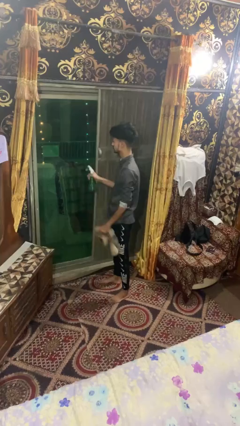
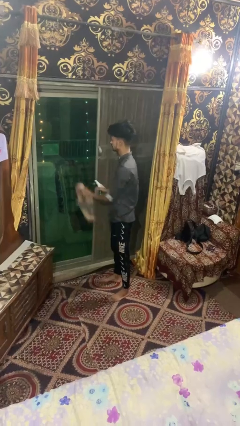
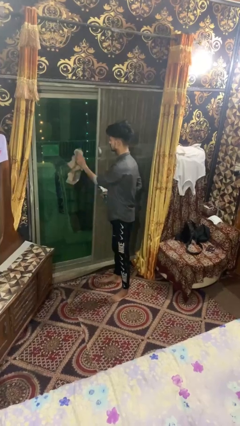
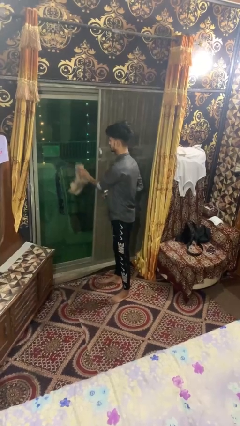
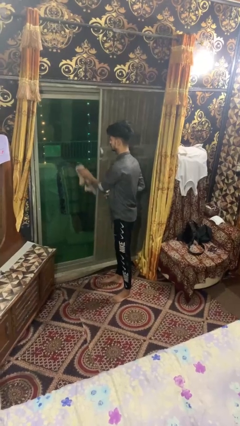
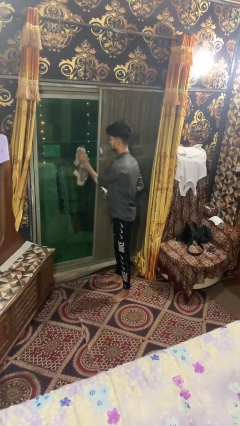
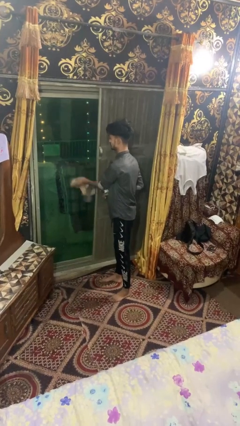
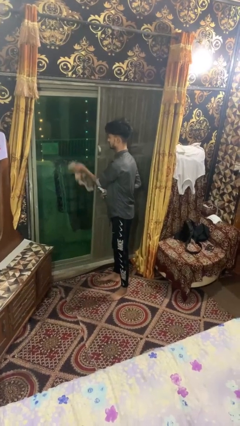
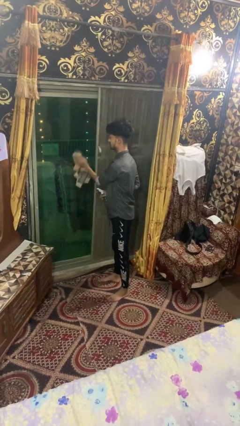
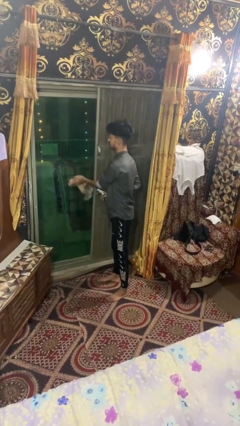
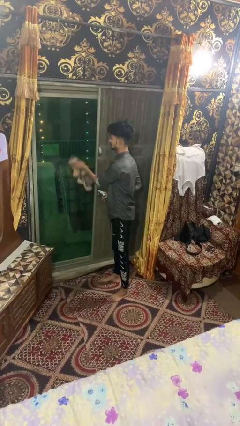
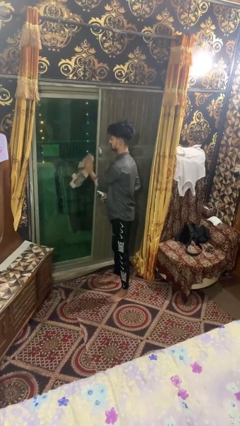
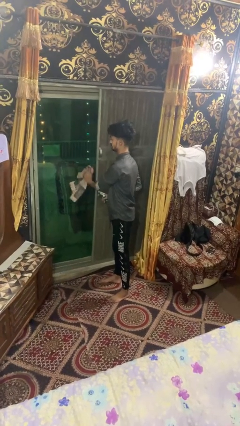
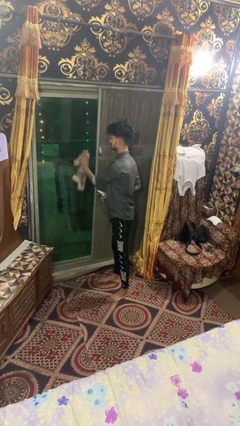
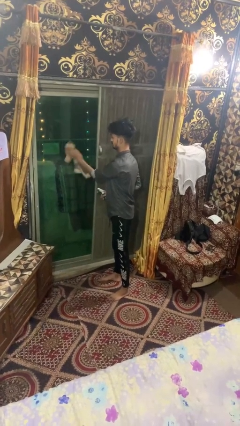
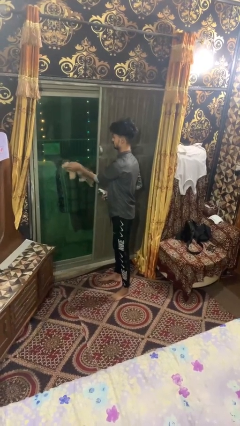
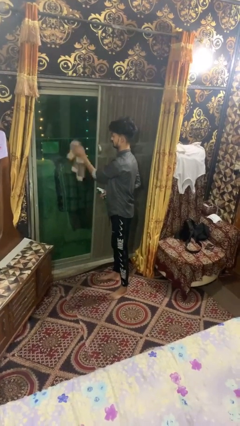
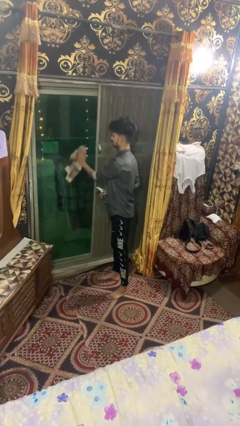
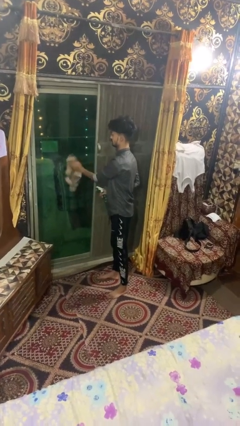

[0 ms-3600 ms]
person washes window

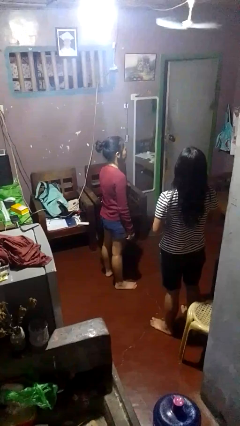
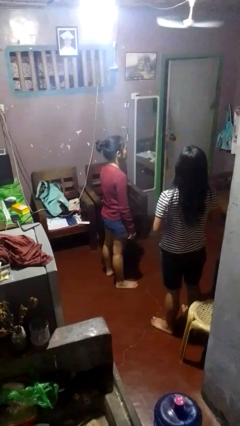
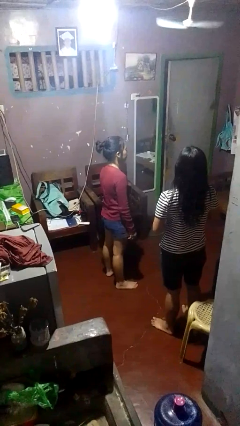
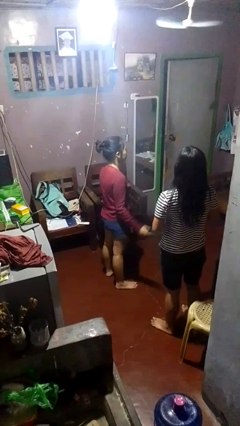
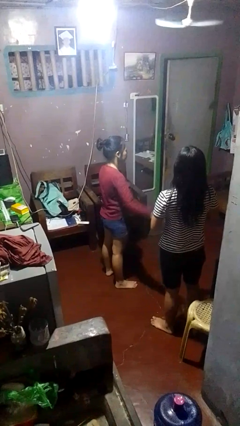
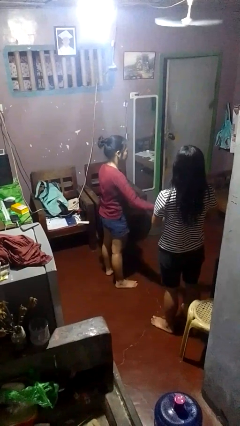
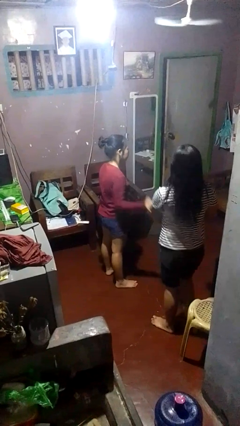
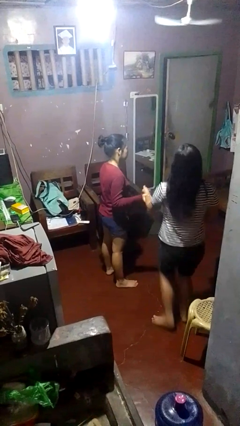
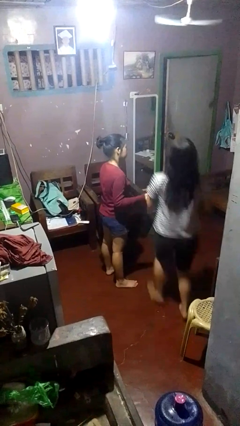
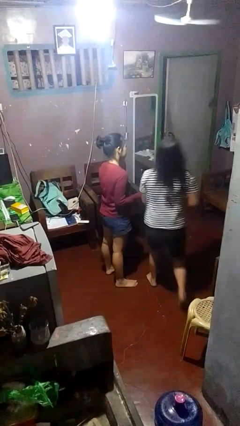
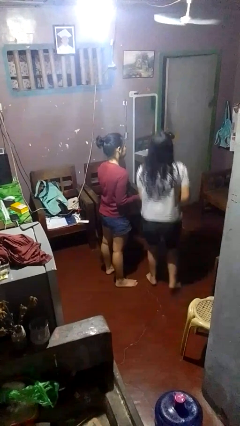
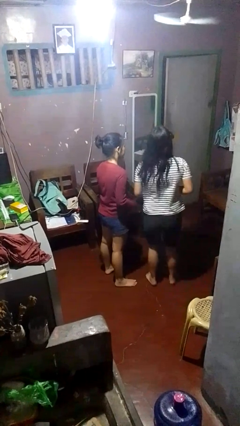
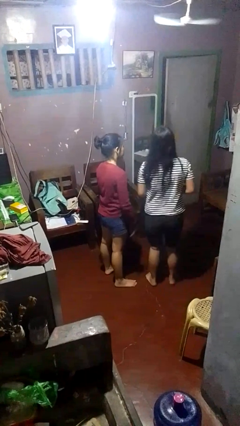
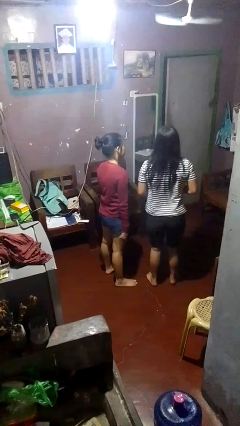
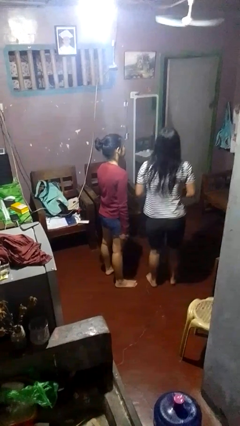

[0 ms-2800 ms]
person grabs person by forearm

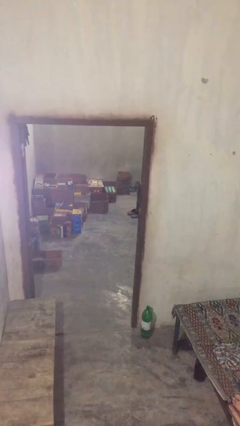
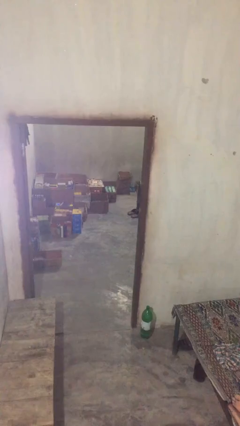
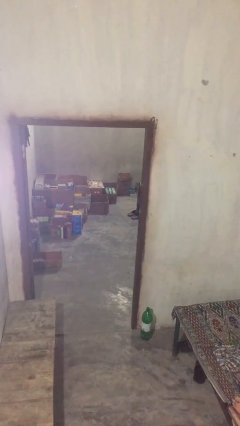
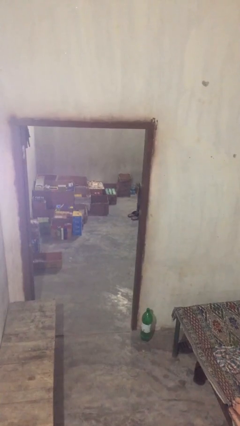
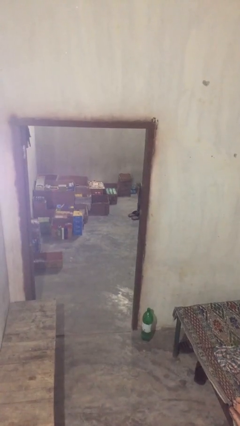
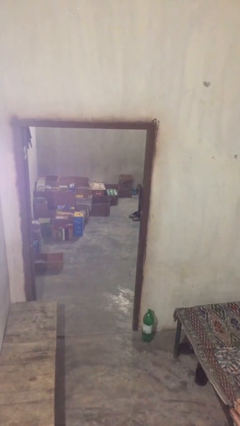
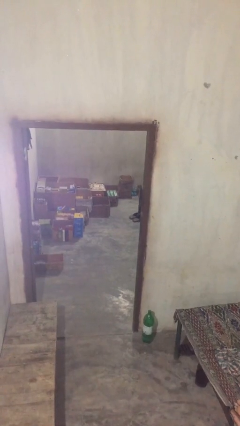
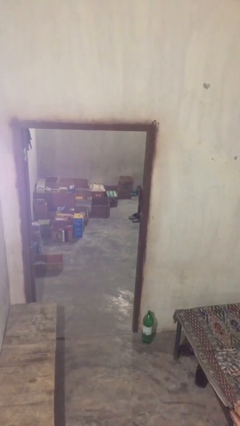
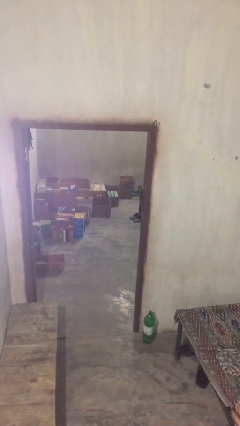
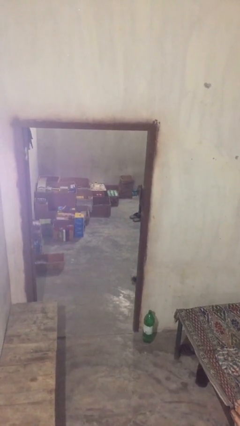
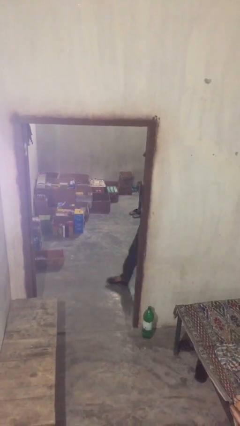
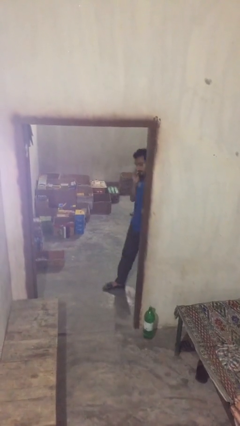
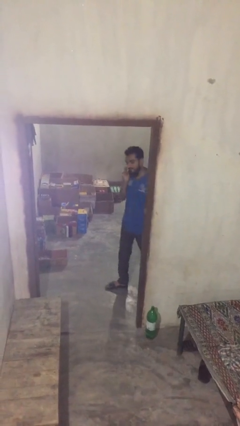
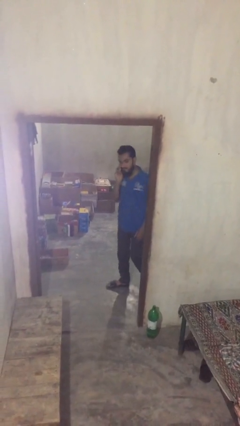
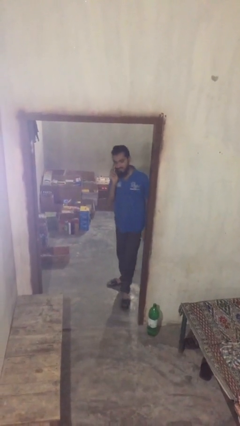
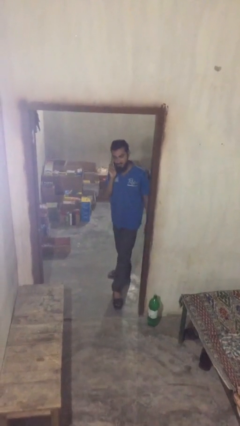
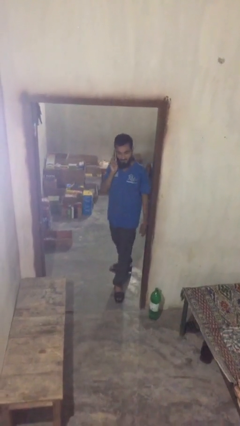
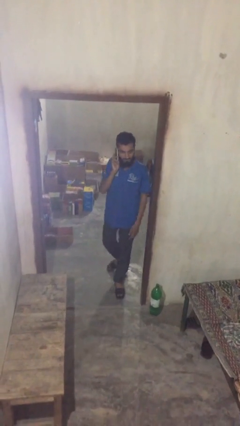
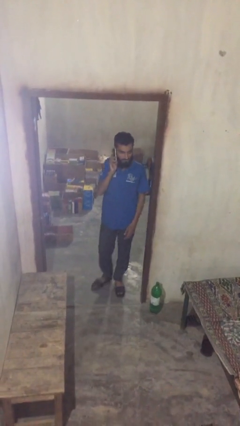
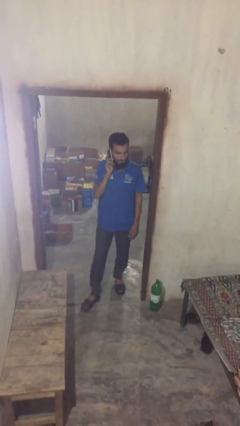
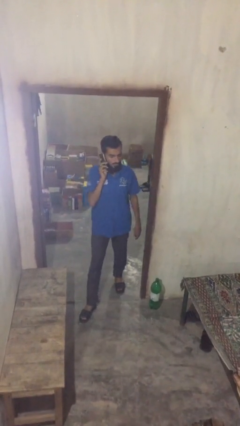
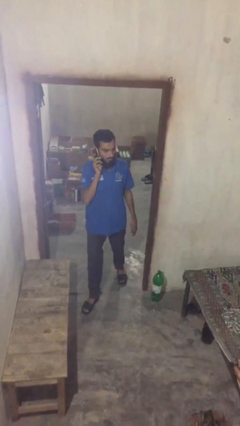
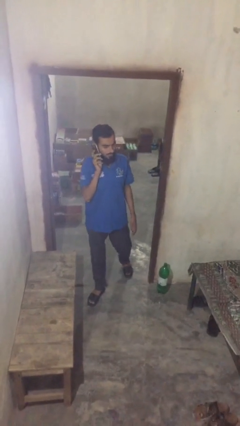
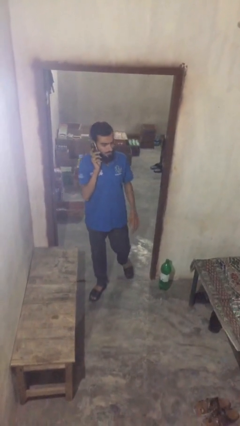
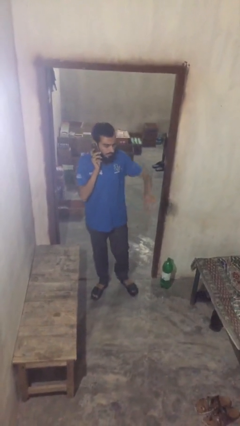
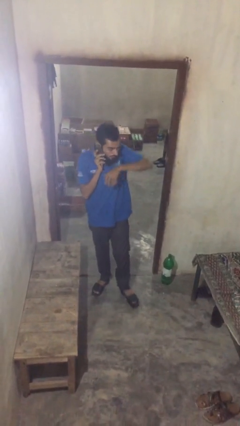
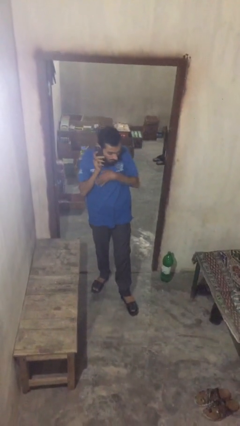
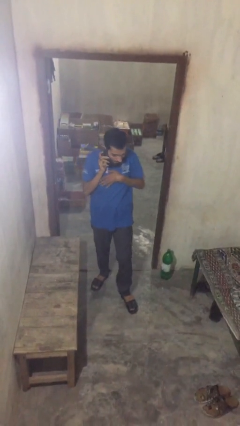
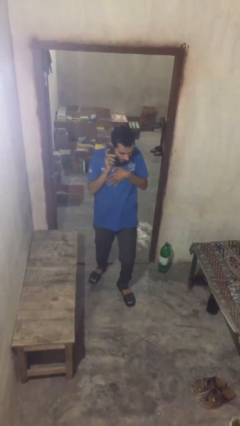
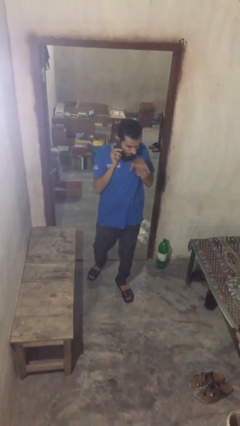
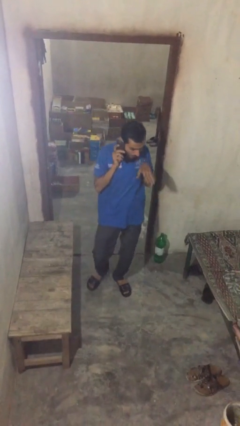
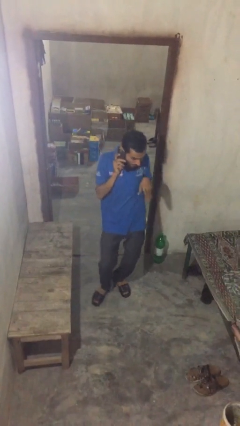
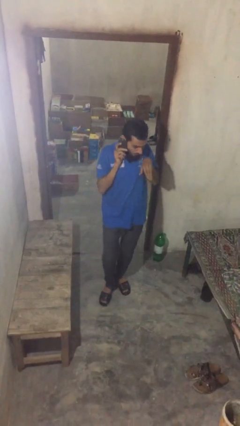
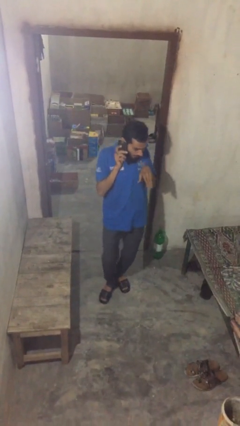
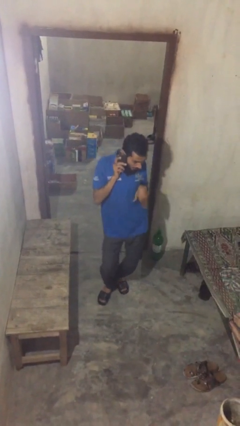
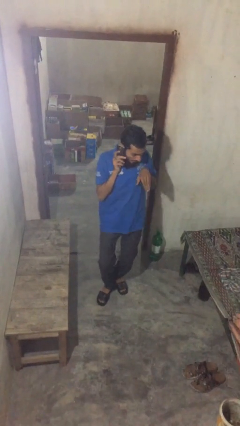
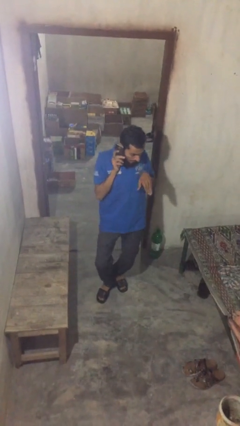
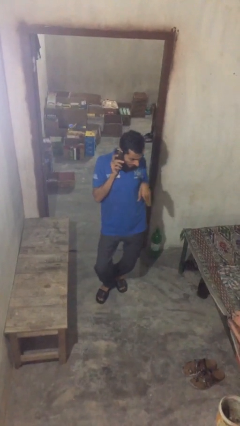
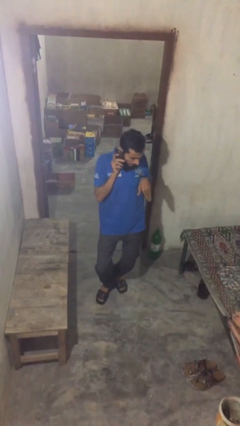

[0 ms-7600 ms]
person enters scene through structure

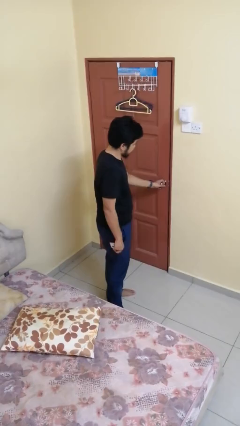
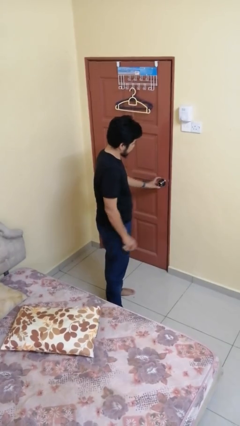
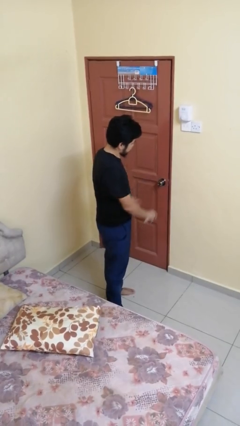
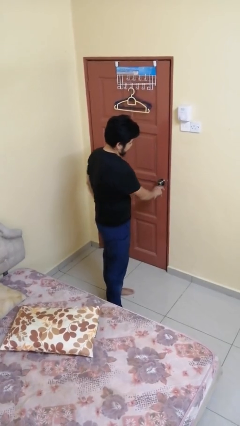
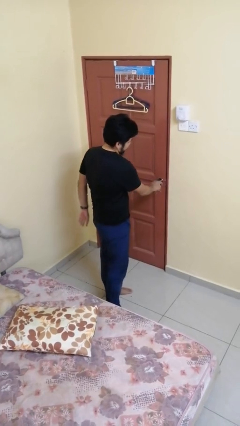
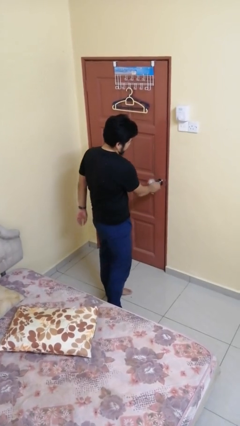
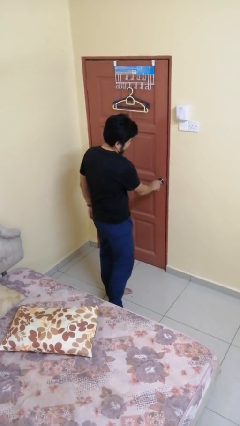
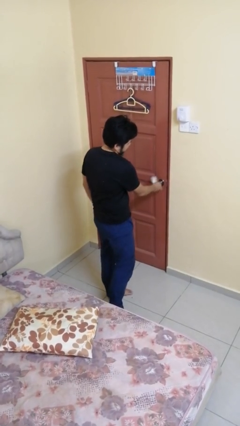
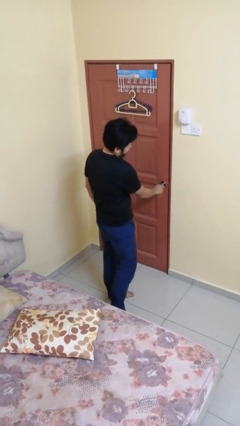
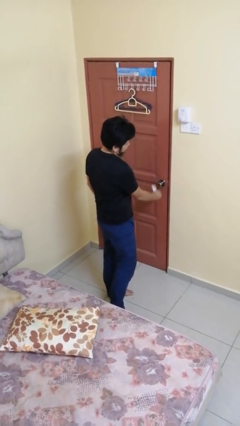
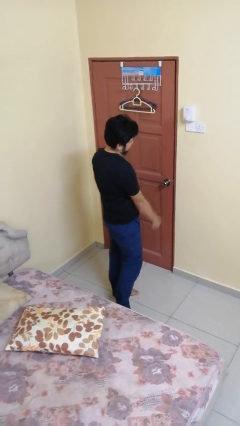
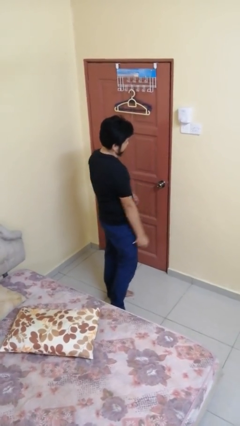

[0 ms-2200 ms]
person locks door with keys

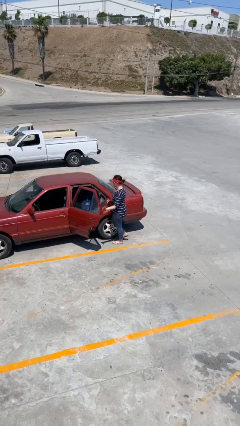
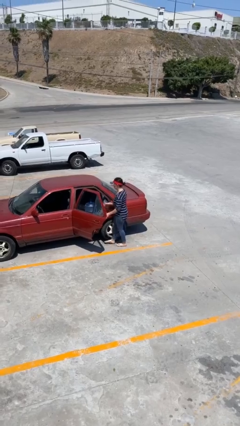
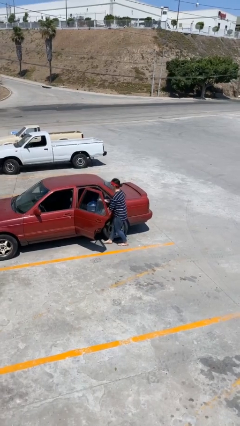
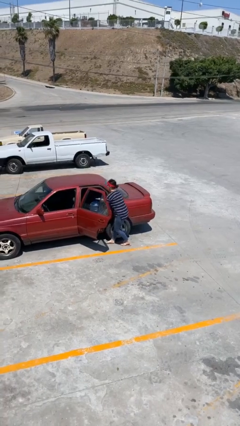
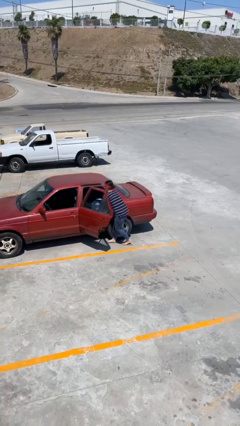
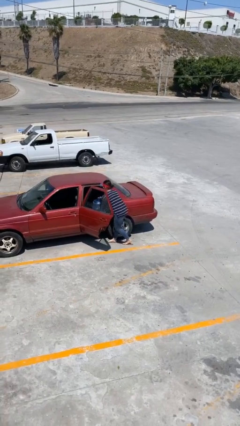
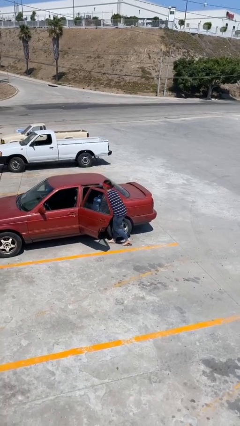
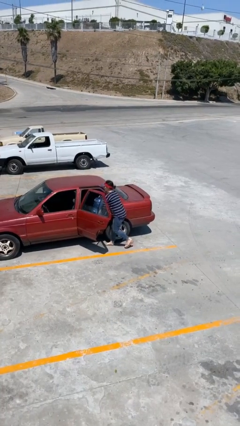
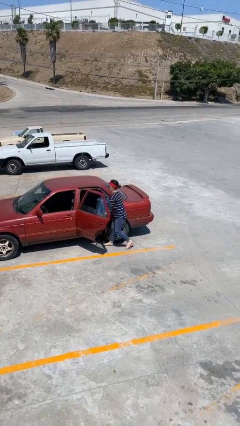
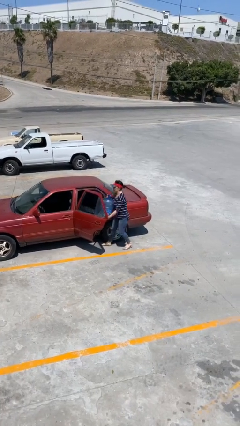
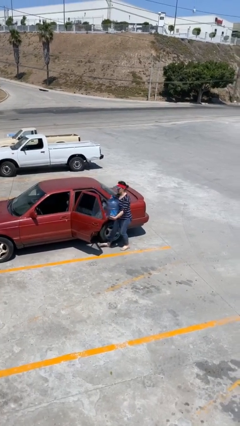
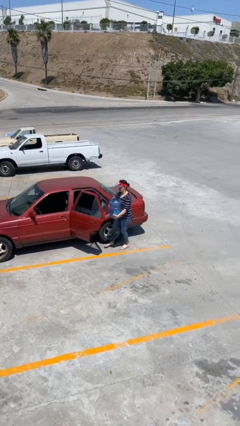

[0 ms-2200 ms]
person unloads car
